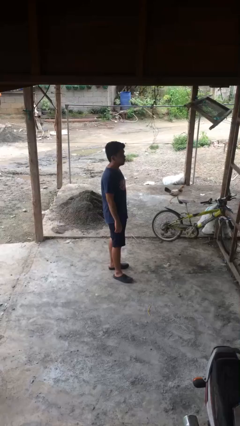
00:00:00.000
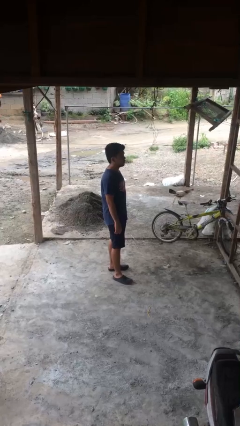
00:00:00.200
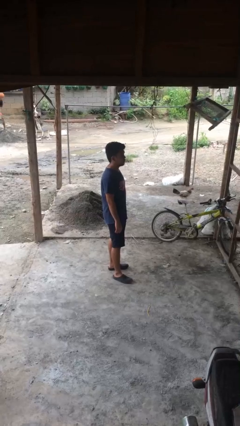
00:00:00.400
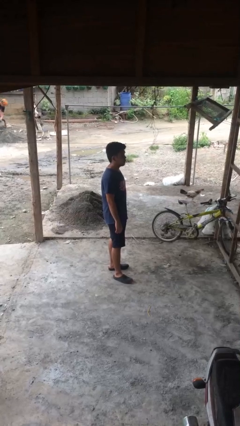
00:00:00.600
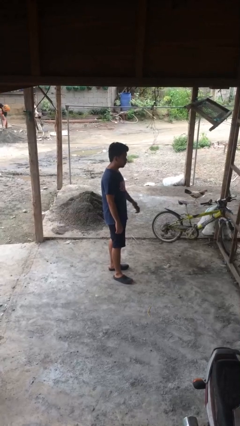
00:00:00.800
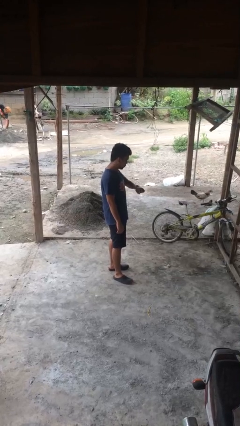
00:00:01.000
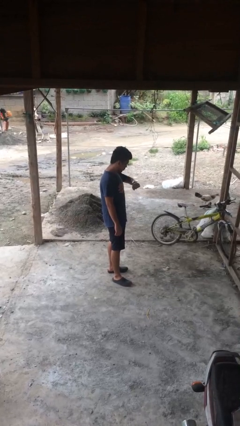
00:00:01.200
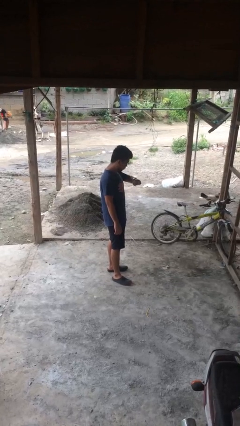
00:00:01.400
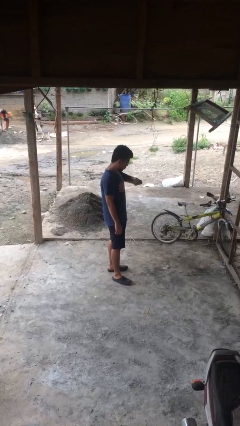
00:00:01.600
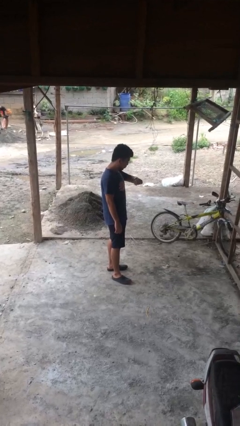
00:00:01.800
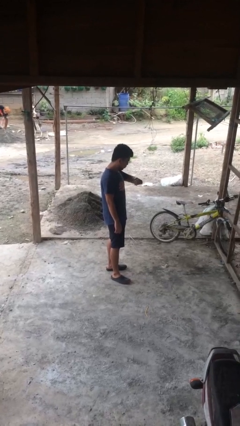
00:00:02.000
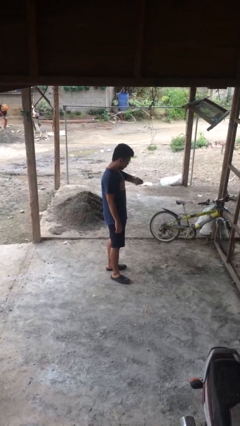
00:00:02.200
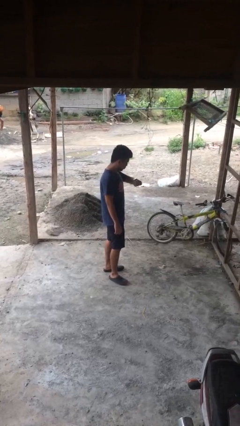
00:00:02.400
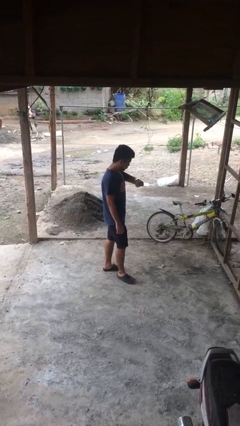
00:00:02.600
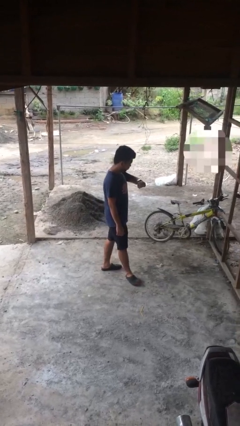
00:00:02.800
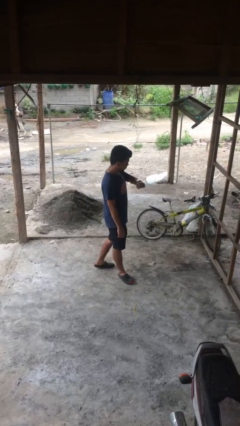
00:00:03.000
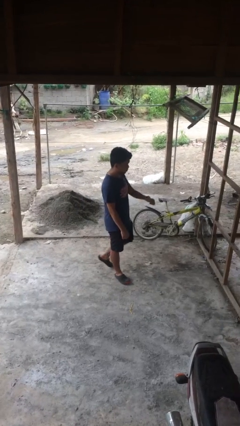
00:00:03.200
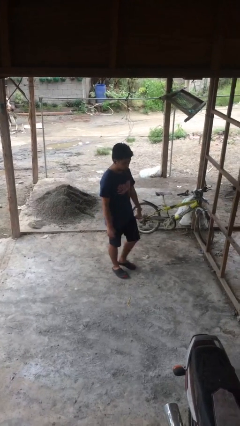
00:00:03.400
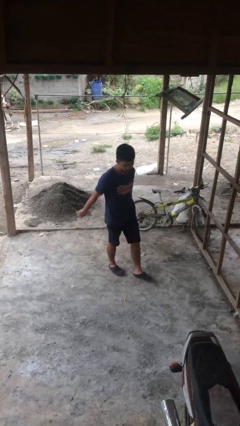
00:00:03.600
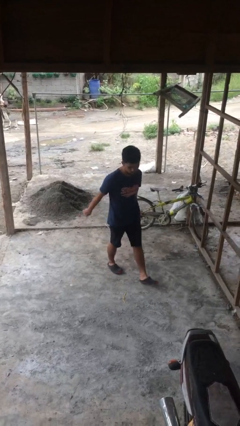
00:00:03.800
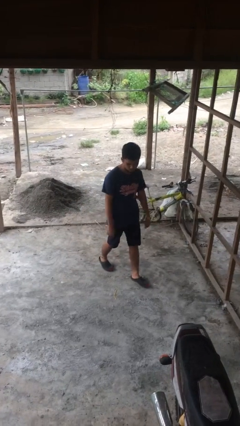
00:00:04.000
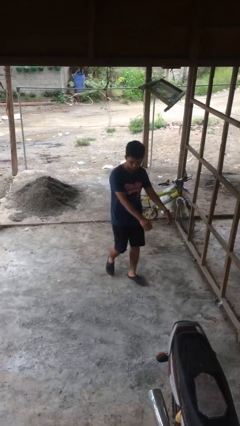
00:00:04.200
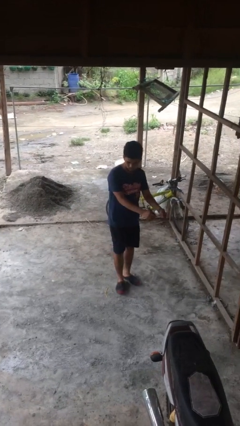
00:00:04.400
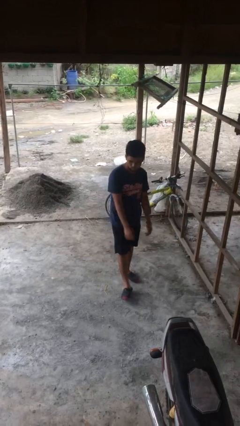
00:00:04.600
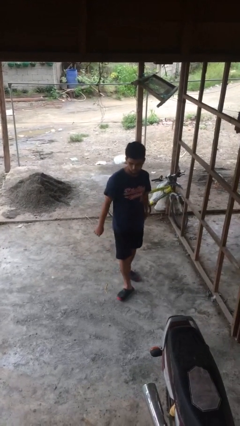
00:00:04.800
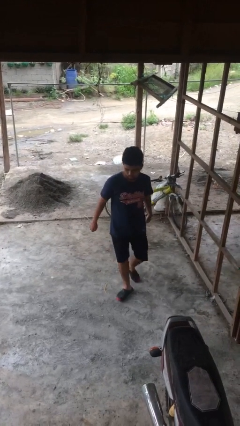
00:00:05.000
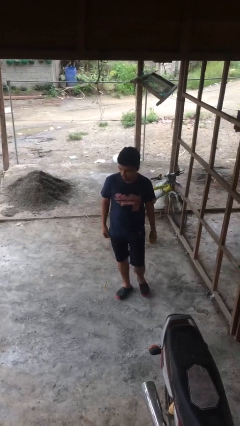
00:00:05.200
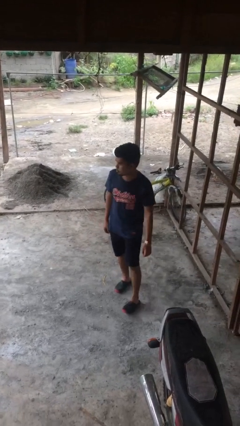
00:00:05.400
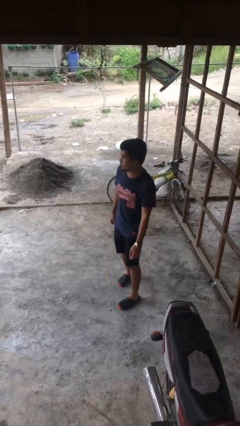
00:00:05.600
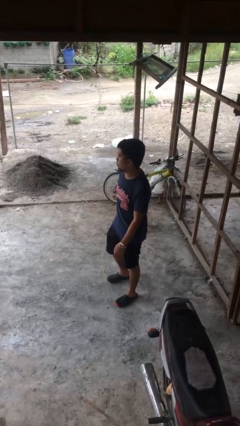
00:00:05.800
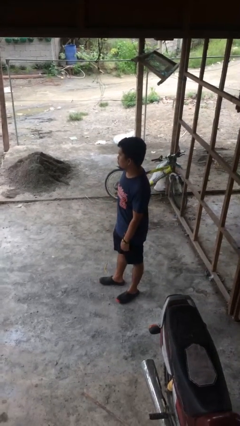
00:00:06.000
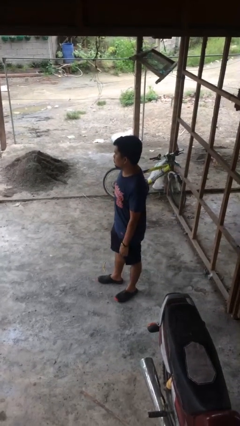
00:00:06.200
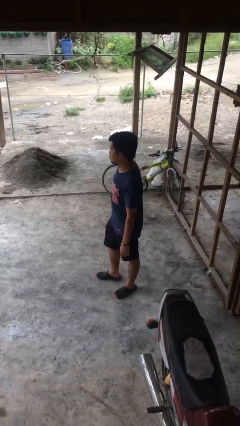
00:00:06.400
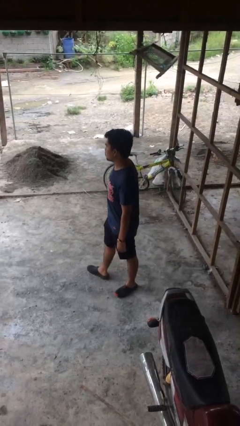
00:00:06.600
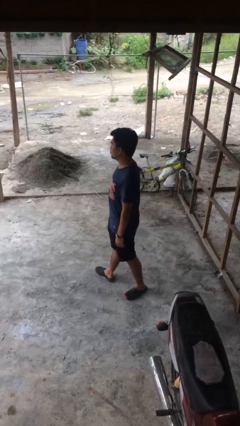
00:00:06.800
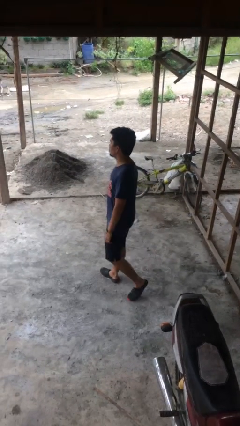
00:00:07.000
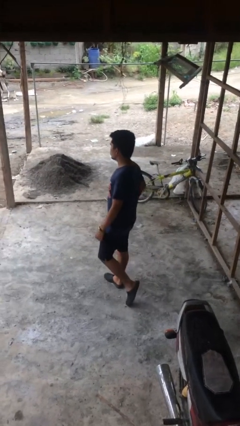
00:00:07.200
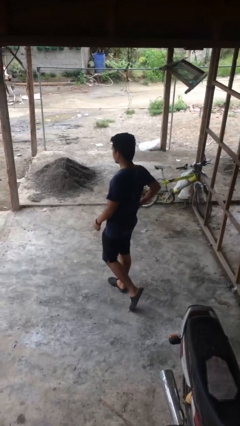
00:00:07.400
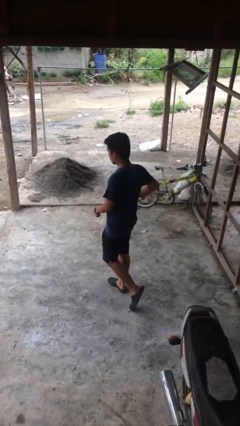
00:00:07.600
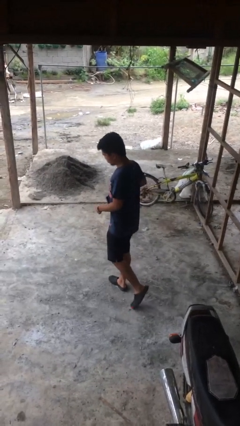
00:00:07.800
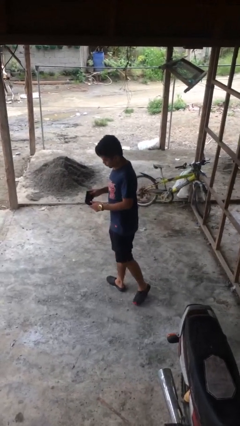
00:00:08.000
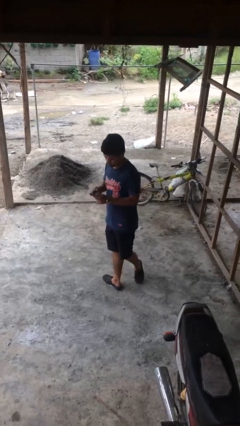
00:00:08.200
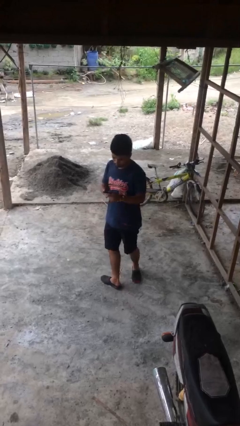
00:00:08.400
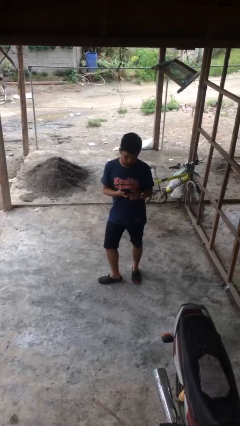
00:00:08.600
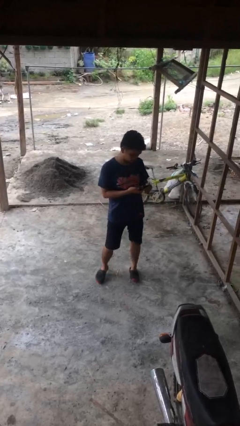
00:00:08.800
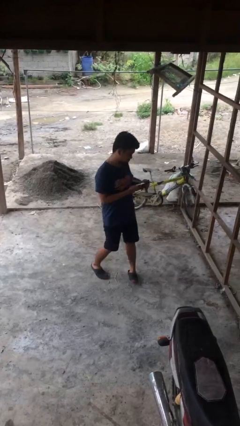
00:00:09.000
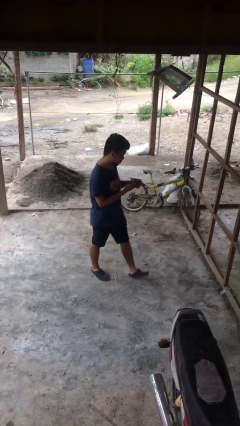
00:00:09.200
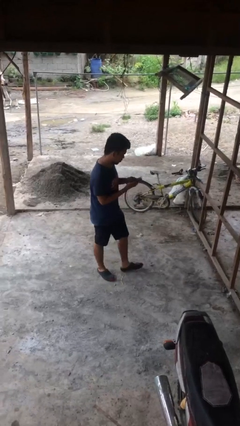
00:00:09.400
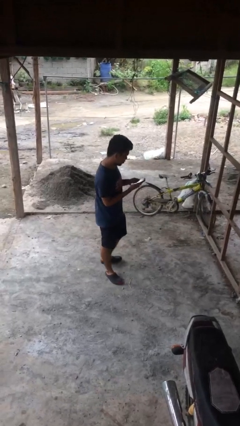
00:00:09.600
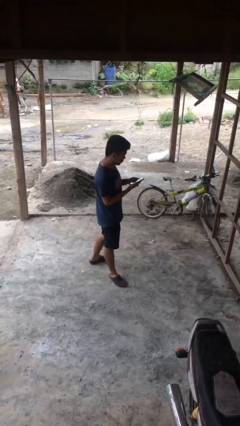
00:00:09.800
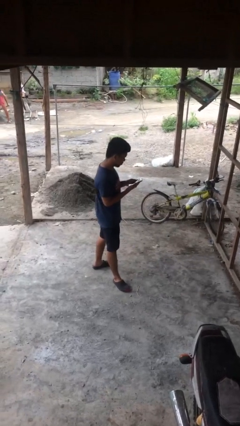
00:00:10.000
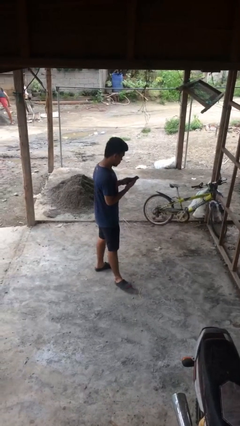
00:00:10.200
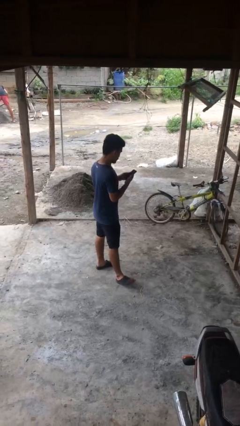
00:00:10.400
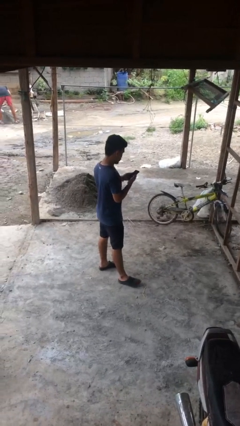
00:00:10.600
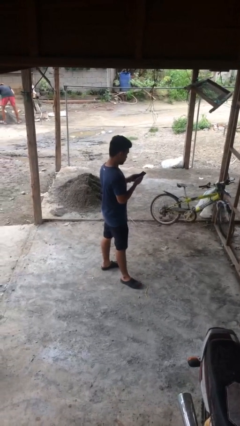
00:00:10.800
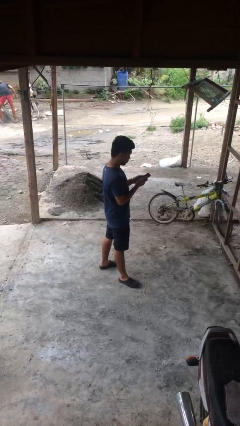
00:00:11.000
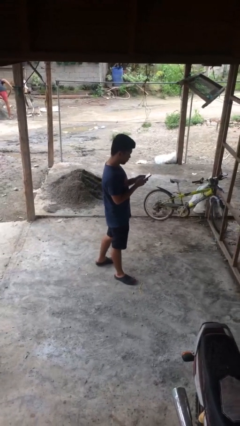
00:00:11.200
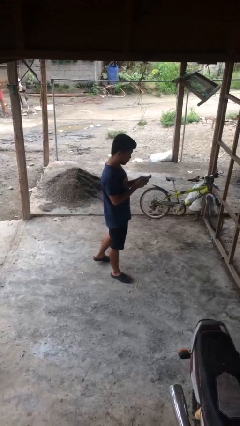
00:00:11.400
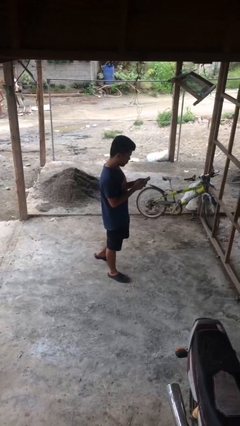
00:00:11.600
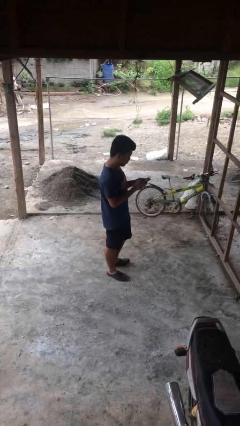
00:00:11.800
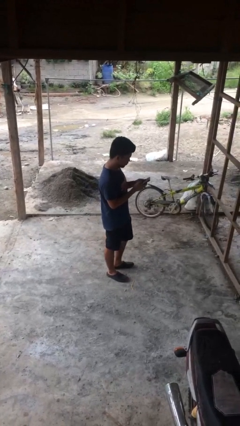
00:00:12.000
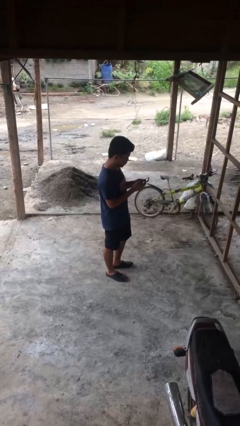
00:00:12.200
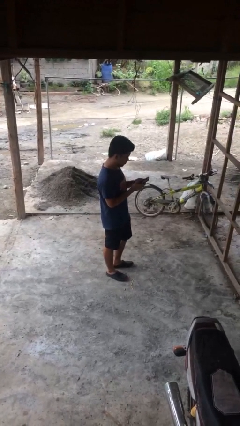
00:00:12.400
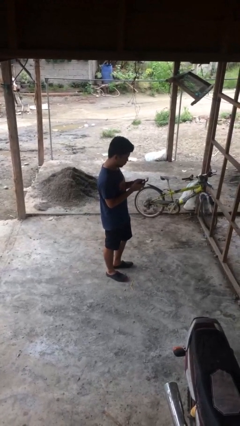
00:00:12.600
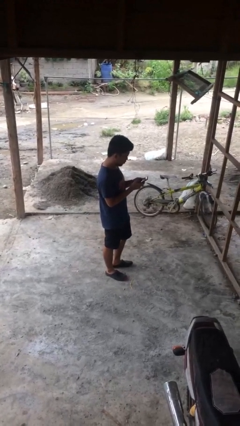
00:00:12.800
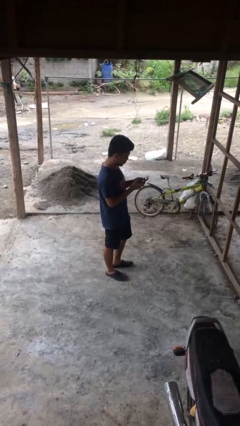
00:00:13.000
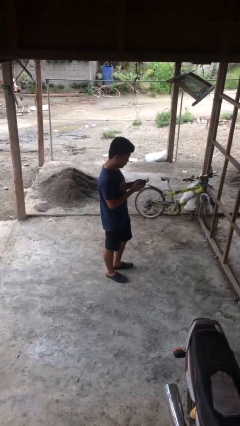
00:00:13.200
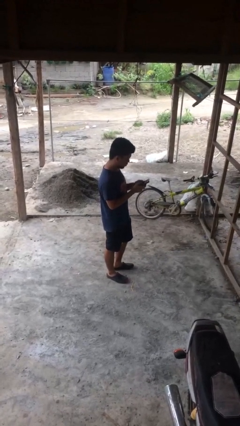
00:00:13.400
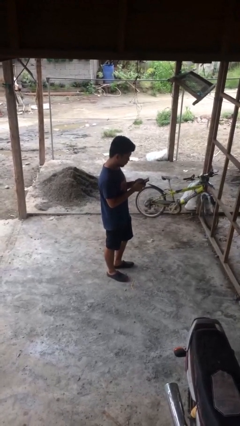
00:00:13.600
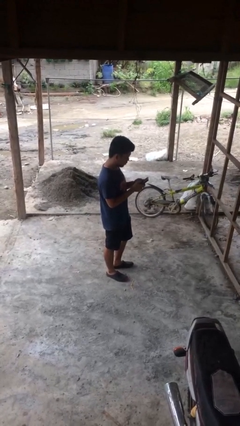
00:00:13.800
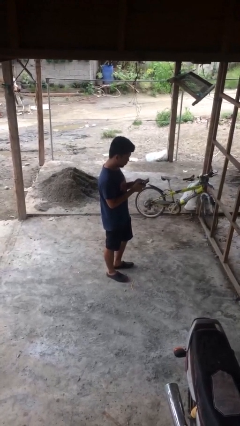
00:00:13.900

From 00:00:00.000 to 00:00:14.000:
person walks

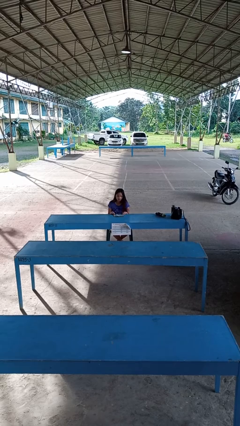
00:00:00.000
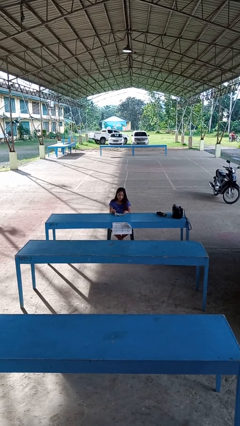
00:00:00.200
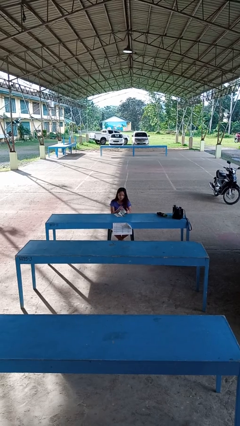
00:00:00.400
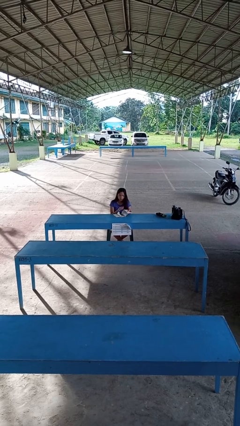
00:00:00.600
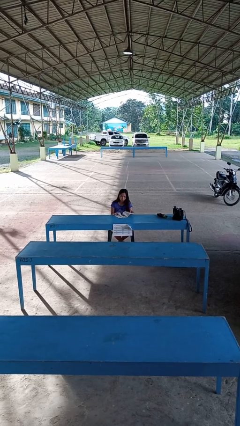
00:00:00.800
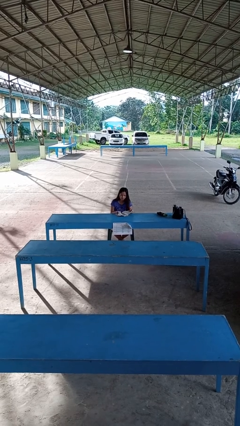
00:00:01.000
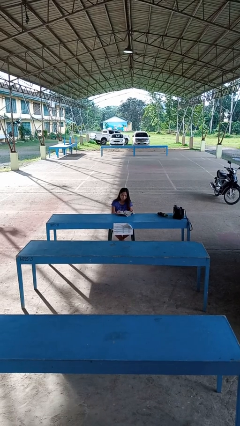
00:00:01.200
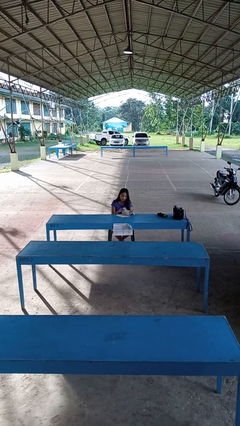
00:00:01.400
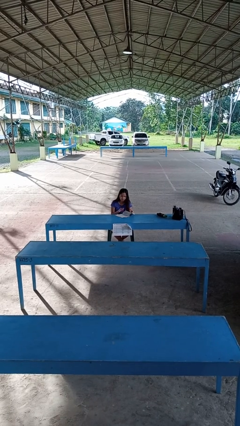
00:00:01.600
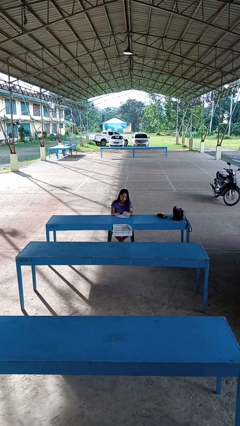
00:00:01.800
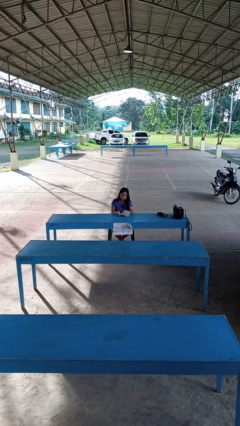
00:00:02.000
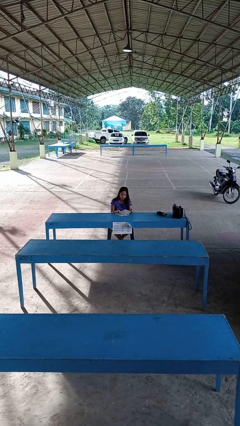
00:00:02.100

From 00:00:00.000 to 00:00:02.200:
person reads magazine

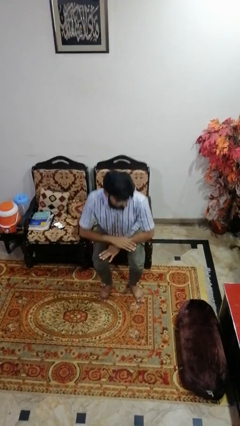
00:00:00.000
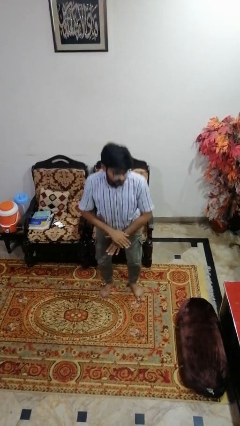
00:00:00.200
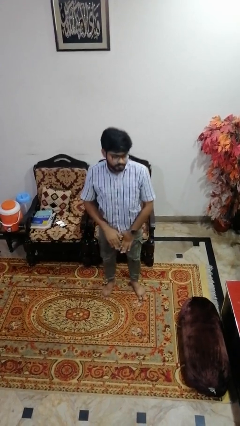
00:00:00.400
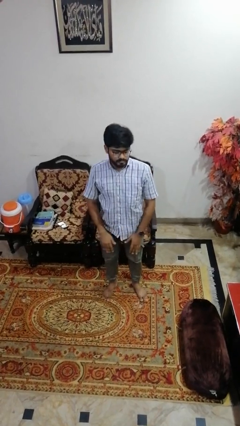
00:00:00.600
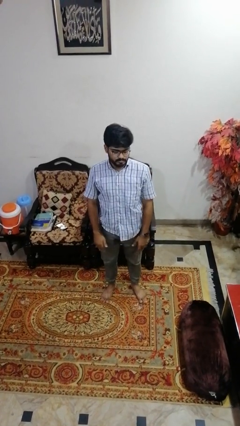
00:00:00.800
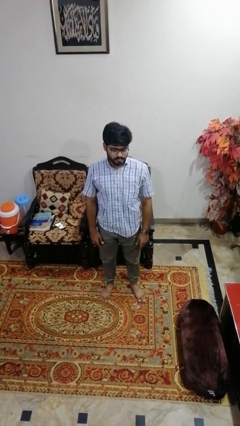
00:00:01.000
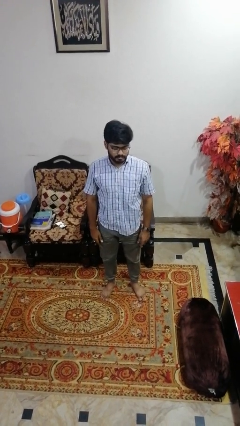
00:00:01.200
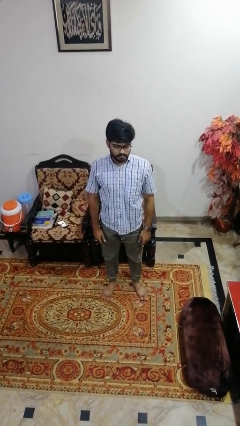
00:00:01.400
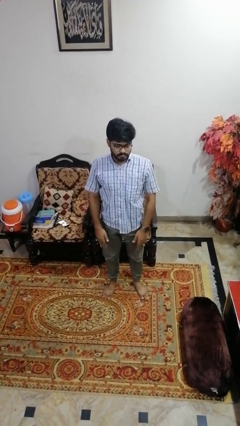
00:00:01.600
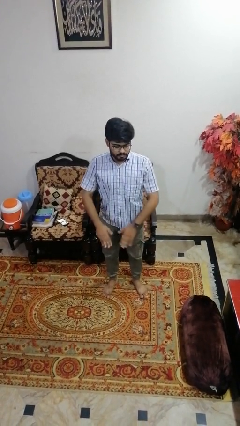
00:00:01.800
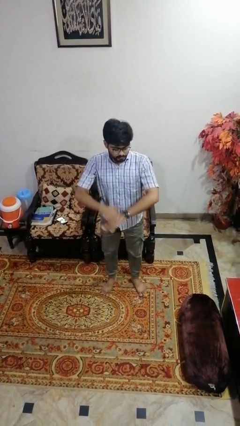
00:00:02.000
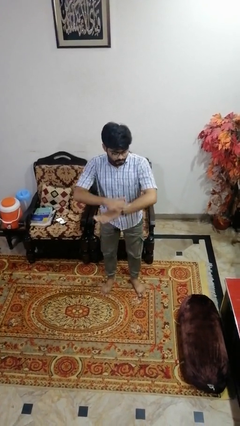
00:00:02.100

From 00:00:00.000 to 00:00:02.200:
person stands up
